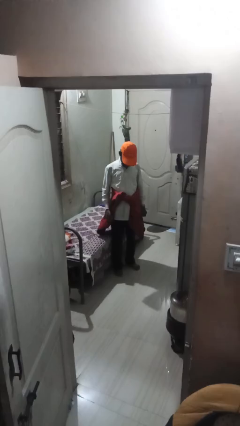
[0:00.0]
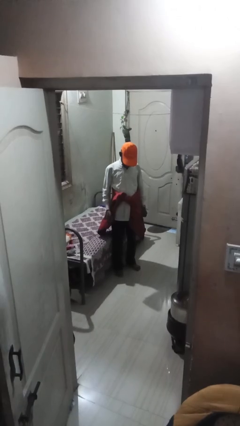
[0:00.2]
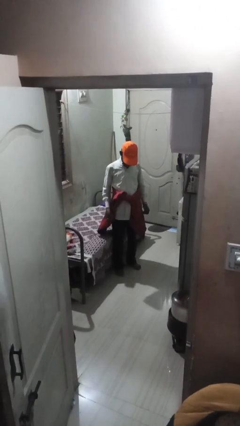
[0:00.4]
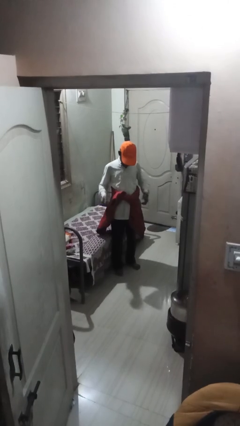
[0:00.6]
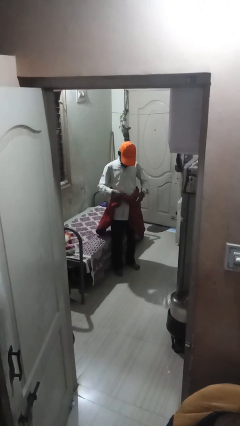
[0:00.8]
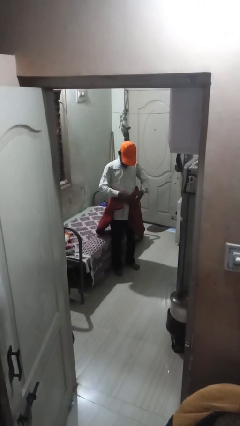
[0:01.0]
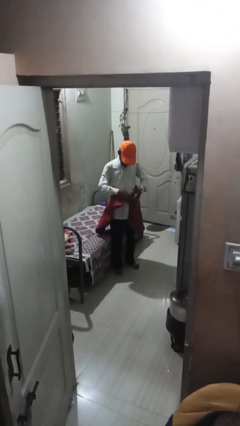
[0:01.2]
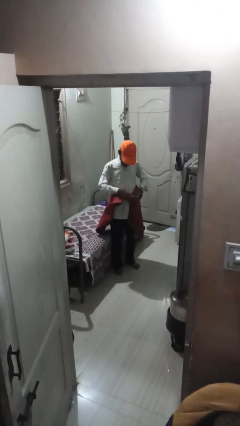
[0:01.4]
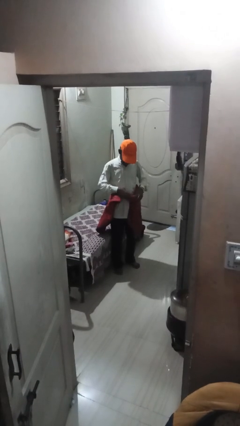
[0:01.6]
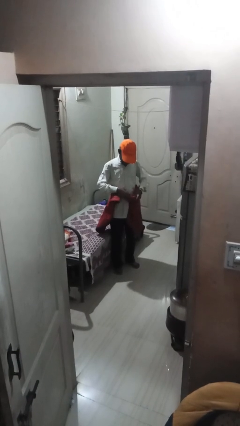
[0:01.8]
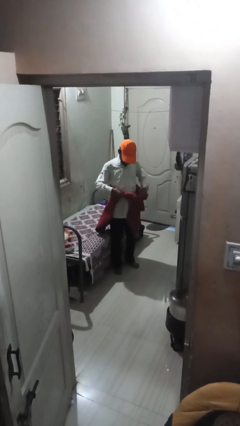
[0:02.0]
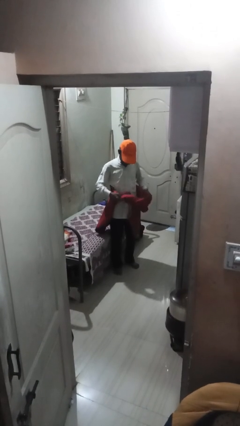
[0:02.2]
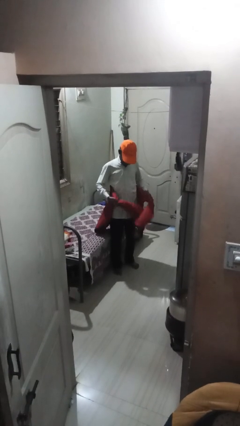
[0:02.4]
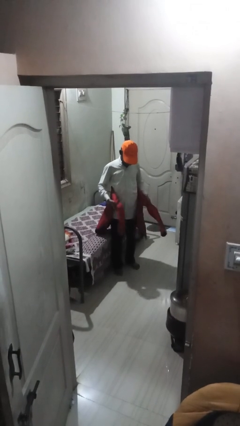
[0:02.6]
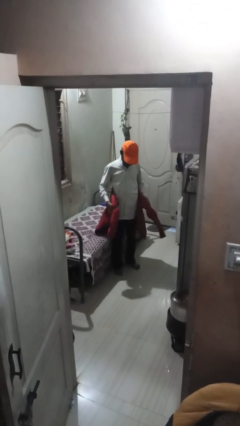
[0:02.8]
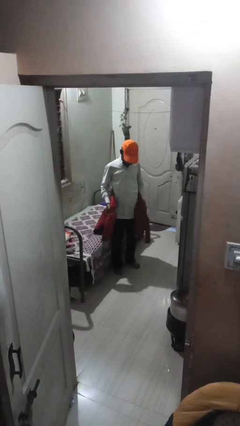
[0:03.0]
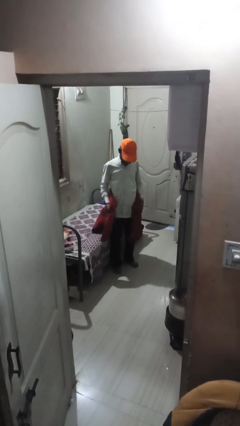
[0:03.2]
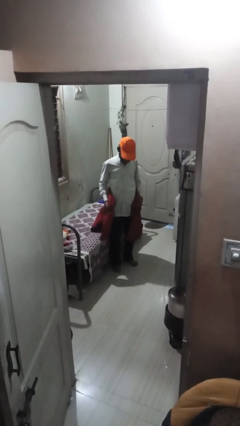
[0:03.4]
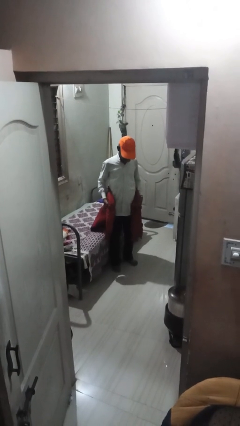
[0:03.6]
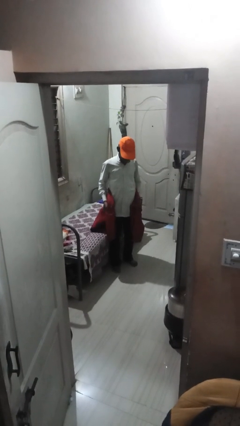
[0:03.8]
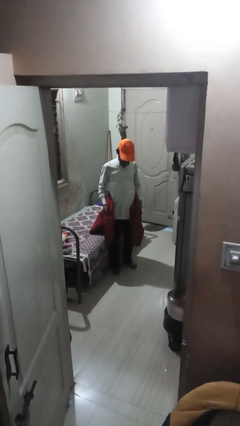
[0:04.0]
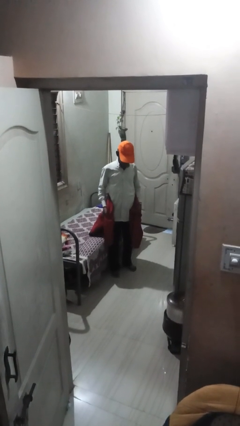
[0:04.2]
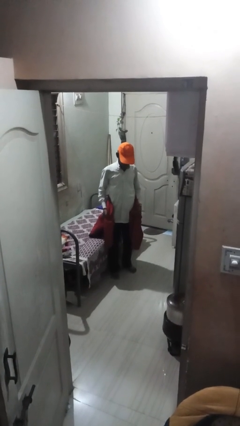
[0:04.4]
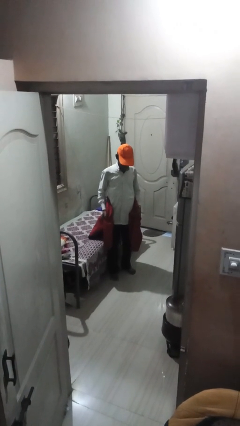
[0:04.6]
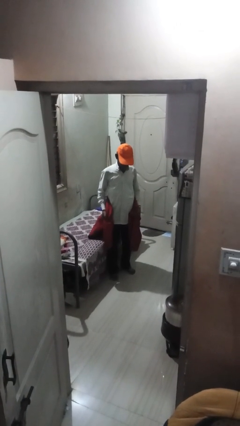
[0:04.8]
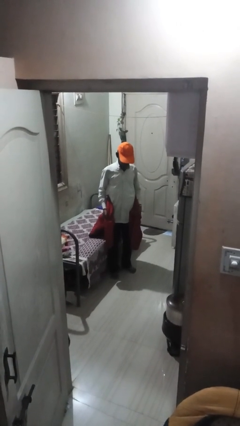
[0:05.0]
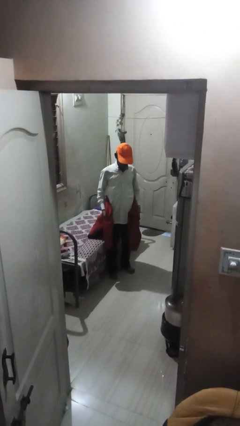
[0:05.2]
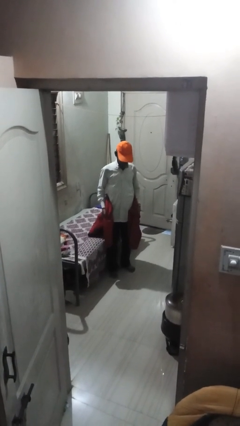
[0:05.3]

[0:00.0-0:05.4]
person unties jacket around waist

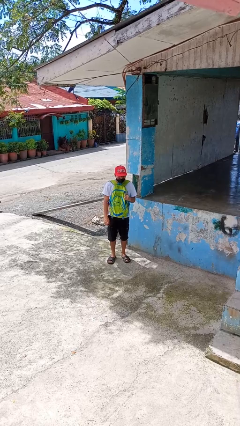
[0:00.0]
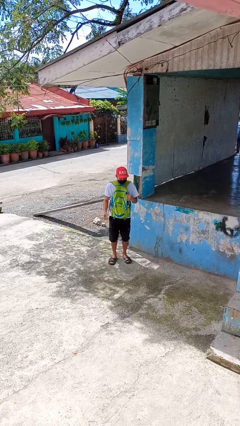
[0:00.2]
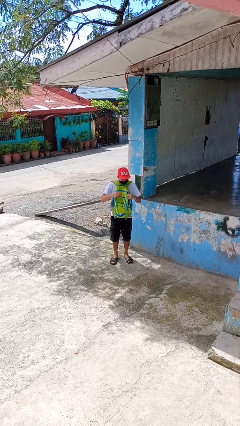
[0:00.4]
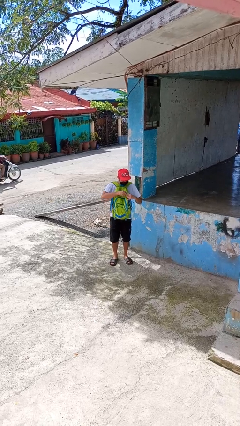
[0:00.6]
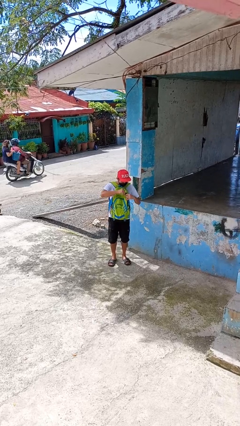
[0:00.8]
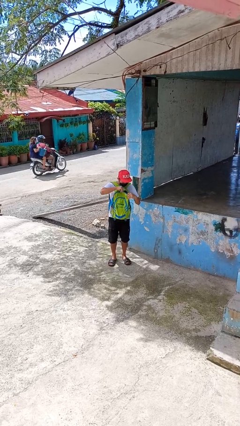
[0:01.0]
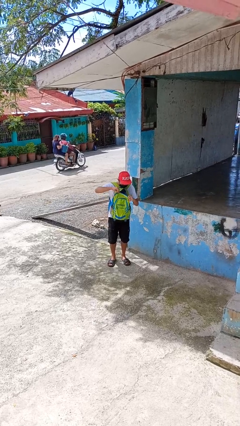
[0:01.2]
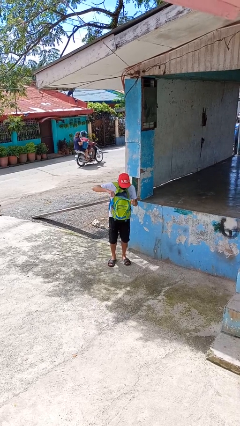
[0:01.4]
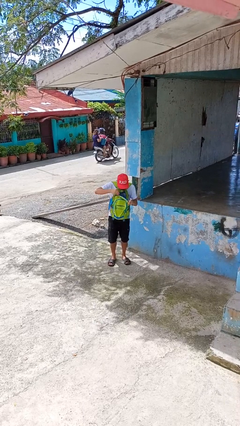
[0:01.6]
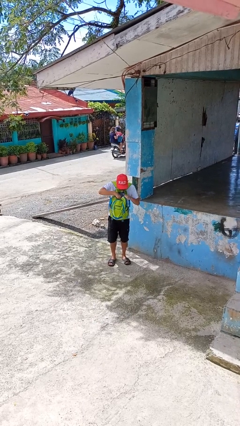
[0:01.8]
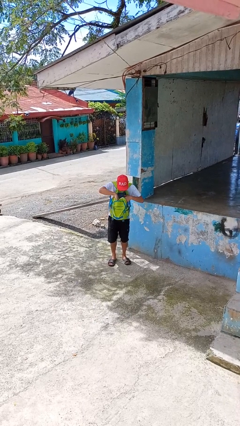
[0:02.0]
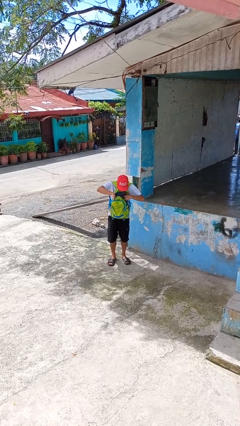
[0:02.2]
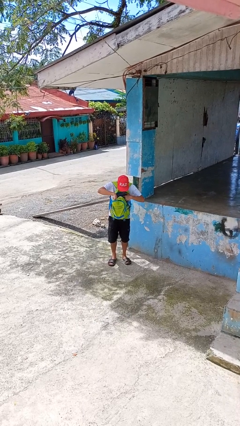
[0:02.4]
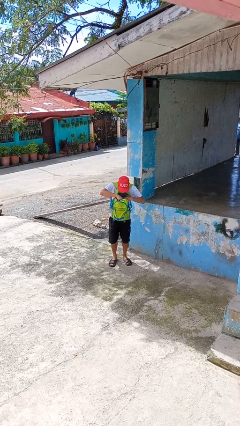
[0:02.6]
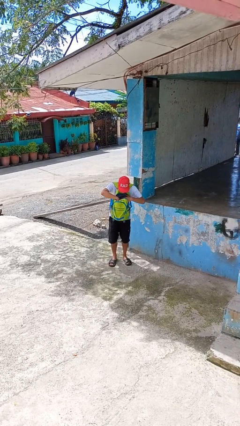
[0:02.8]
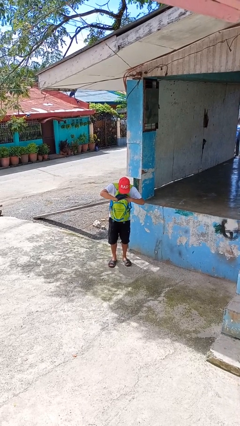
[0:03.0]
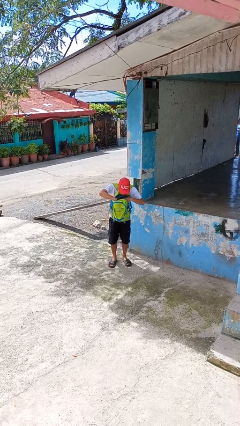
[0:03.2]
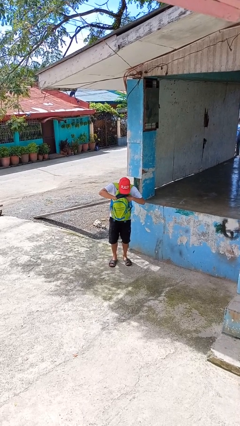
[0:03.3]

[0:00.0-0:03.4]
person searches in backpack

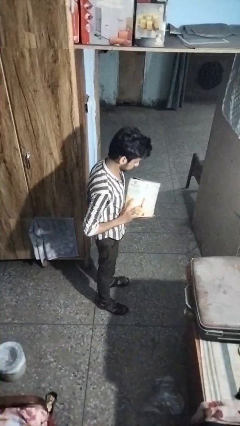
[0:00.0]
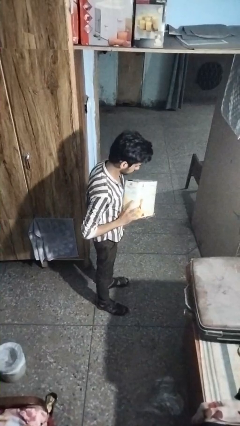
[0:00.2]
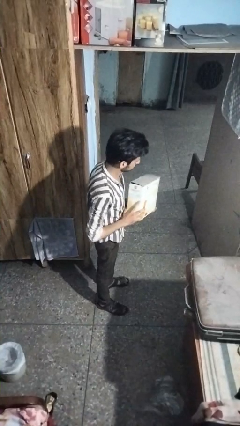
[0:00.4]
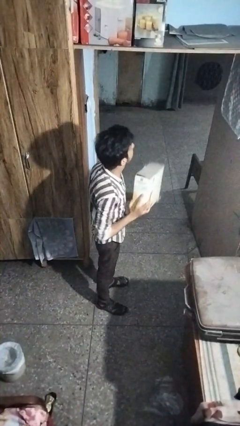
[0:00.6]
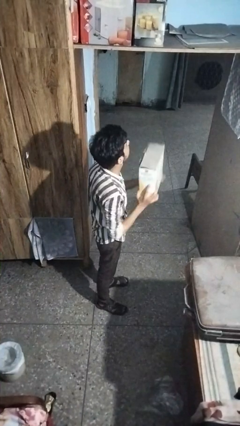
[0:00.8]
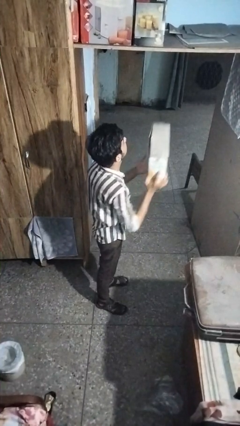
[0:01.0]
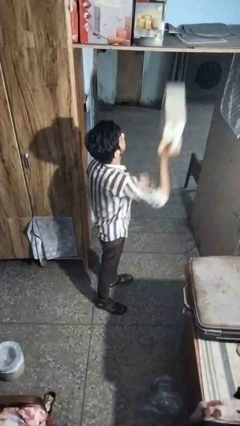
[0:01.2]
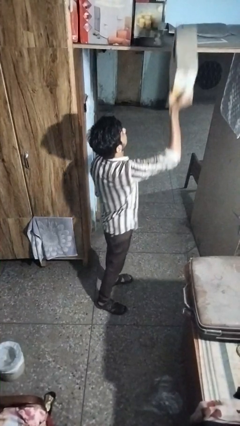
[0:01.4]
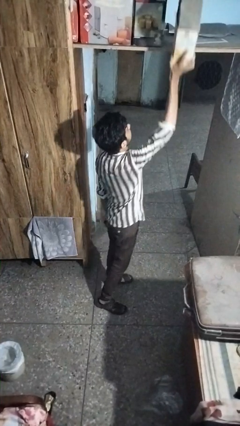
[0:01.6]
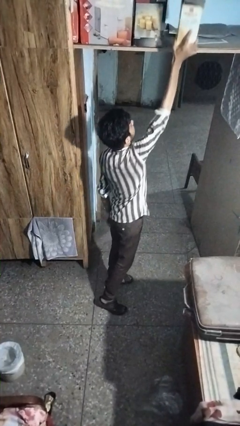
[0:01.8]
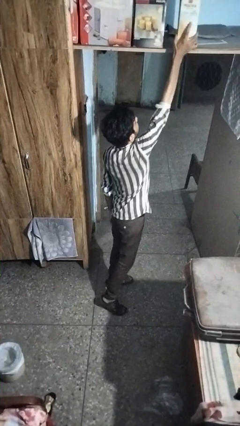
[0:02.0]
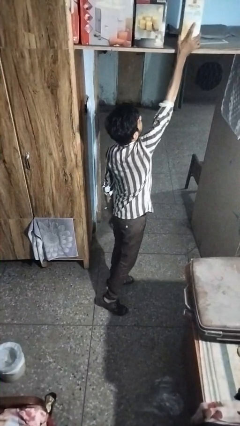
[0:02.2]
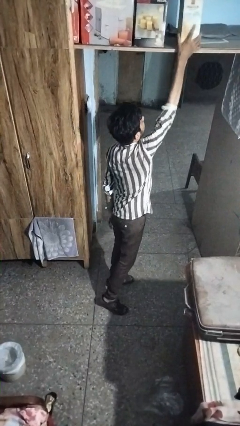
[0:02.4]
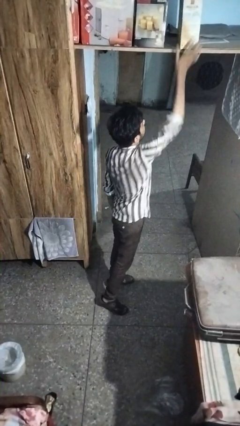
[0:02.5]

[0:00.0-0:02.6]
person puts down object on shelf

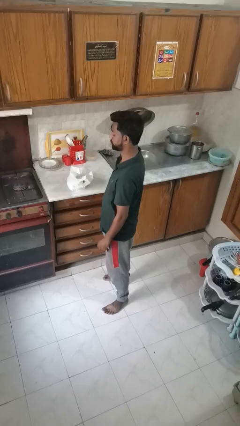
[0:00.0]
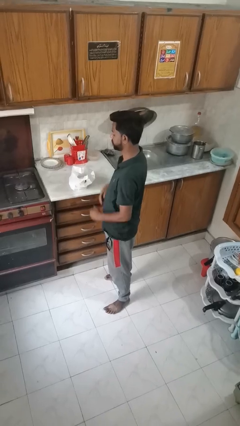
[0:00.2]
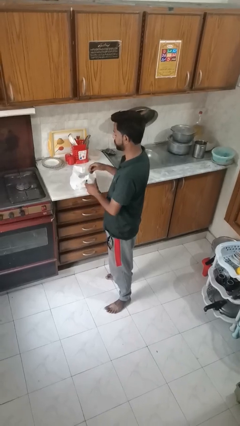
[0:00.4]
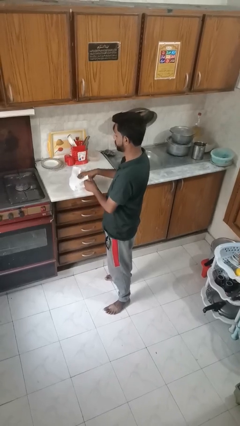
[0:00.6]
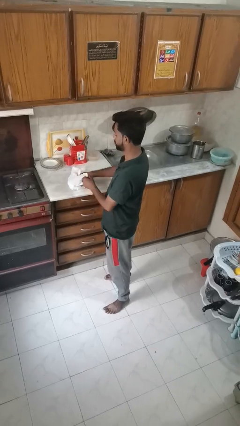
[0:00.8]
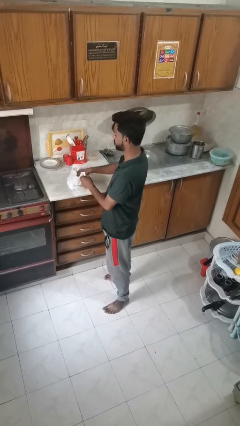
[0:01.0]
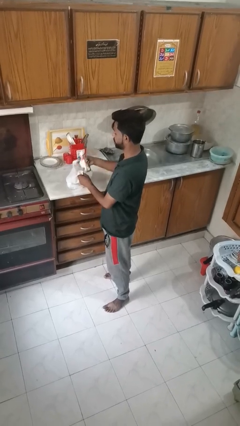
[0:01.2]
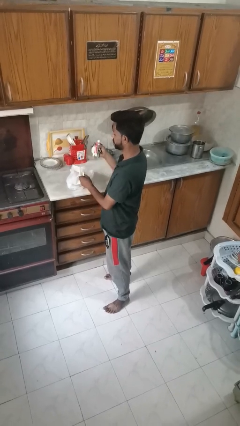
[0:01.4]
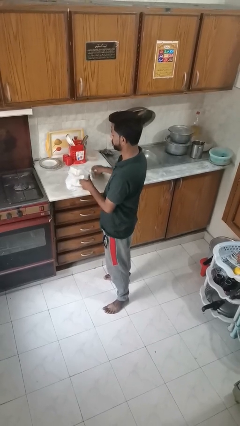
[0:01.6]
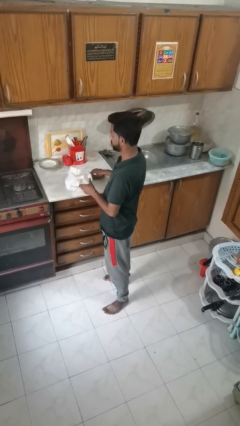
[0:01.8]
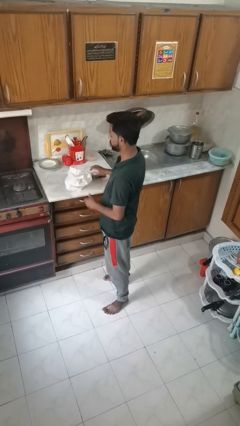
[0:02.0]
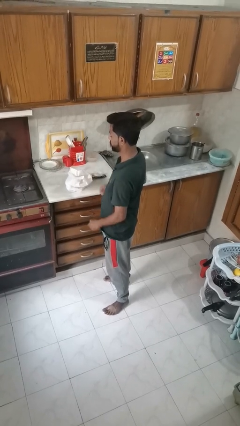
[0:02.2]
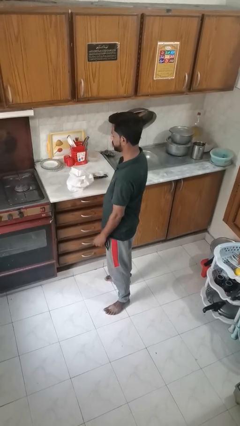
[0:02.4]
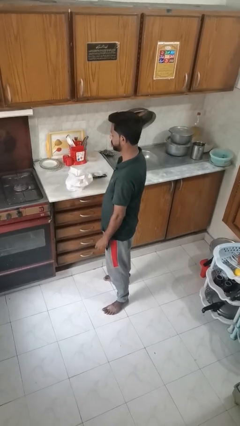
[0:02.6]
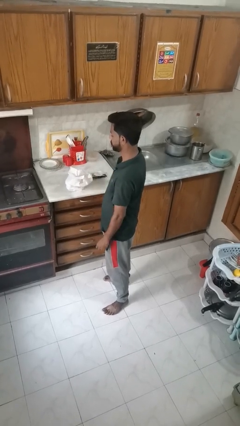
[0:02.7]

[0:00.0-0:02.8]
person takes object from bag

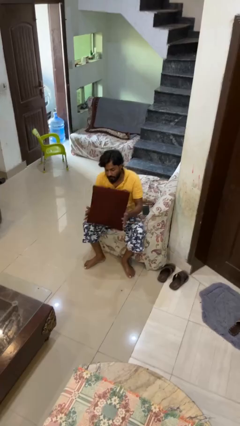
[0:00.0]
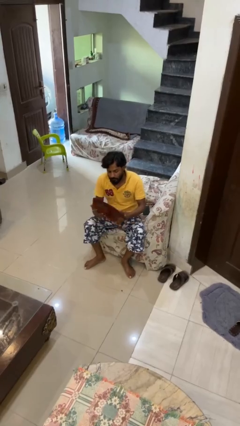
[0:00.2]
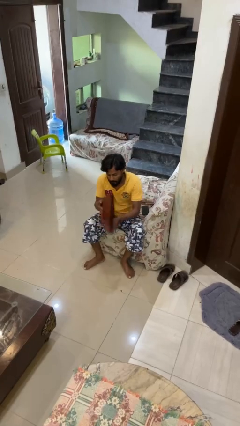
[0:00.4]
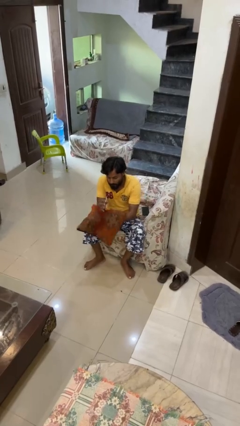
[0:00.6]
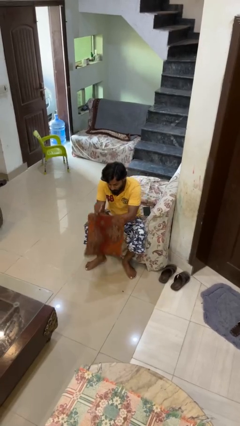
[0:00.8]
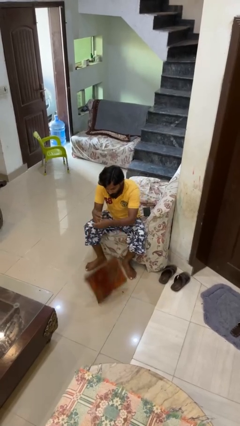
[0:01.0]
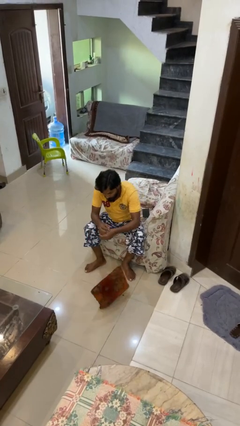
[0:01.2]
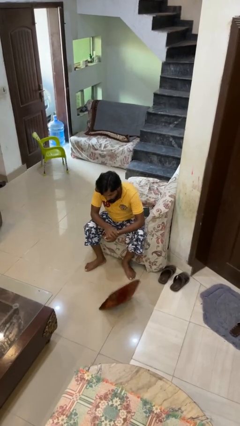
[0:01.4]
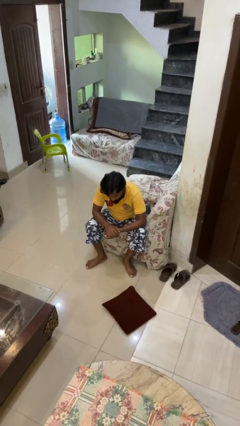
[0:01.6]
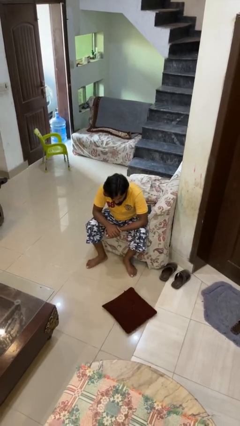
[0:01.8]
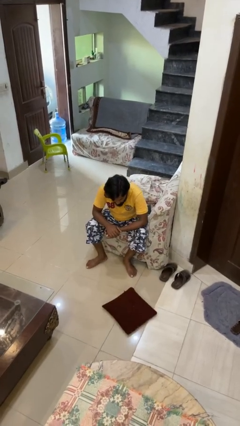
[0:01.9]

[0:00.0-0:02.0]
person drops object

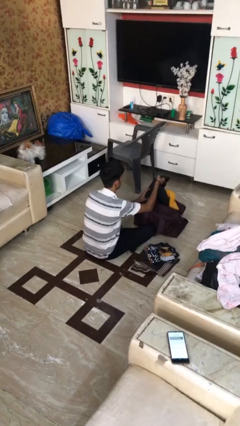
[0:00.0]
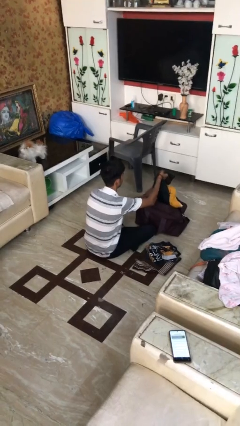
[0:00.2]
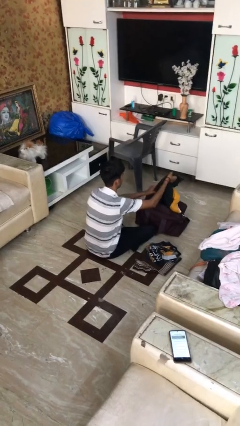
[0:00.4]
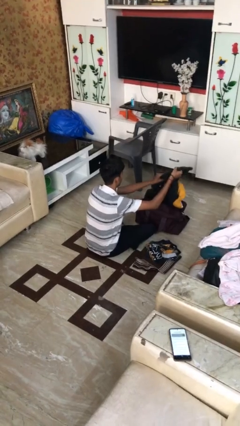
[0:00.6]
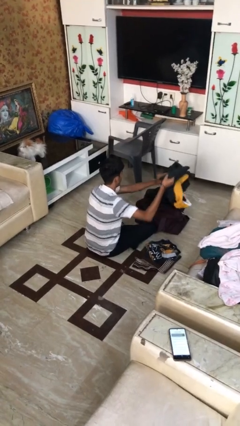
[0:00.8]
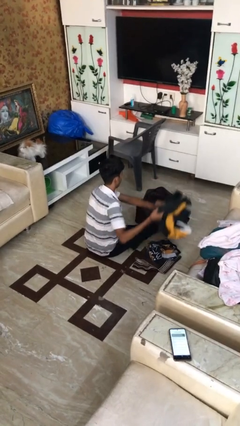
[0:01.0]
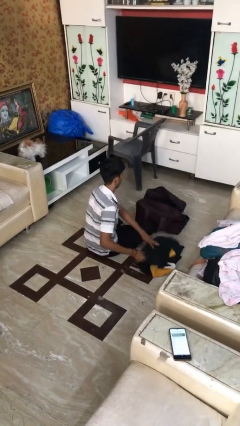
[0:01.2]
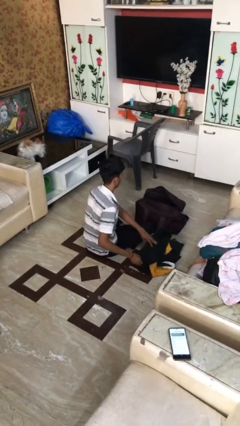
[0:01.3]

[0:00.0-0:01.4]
person unloads clothes from suitcase

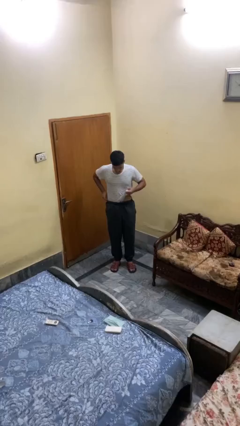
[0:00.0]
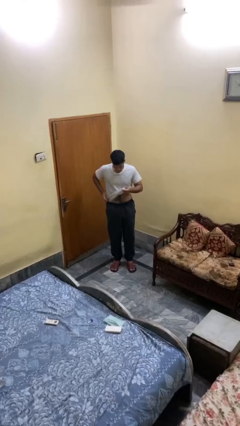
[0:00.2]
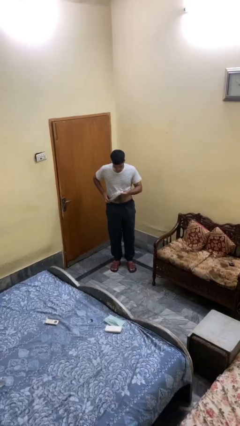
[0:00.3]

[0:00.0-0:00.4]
person untucks shirt
